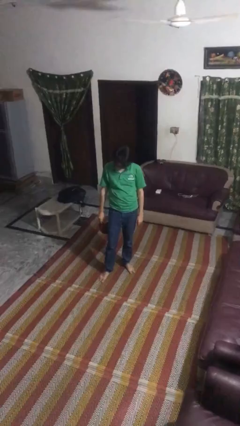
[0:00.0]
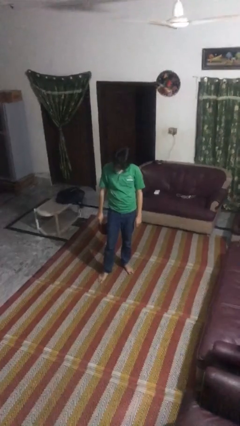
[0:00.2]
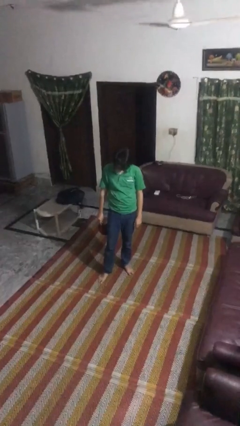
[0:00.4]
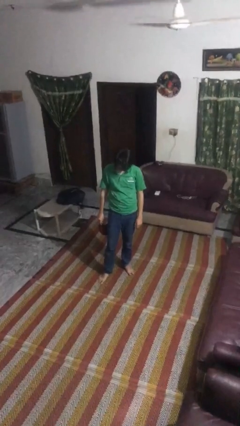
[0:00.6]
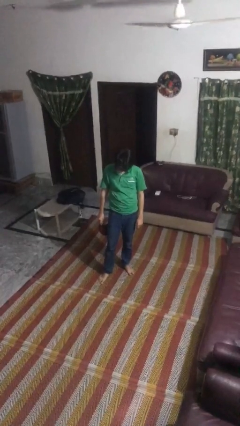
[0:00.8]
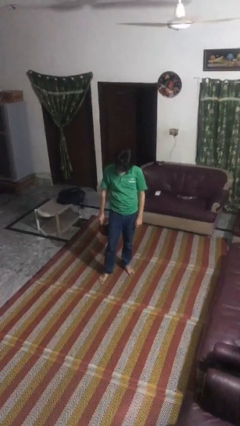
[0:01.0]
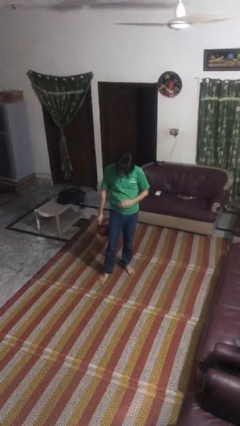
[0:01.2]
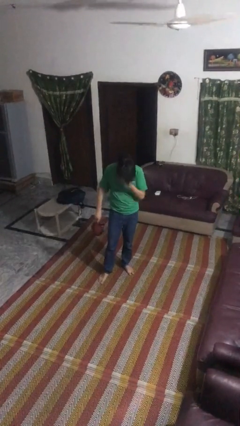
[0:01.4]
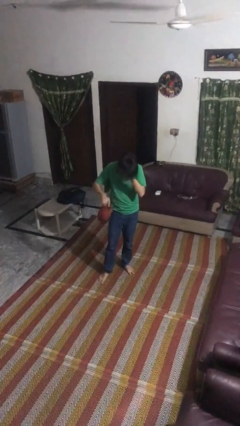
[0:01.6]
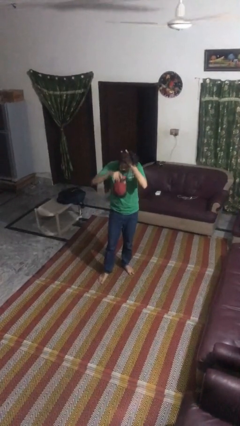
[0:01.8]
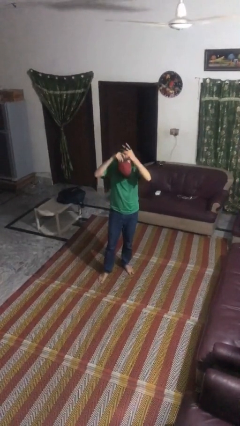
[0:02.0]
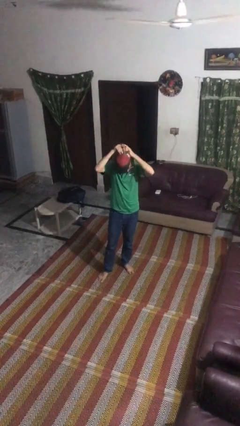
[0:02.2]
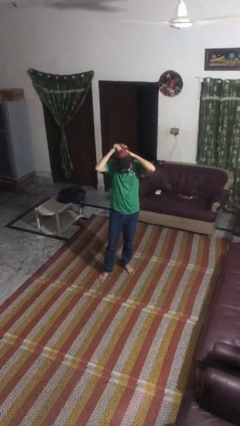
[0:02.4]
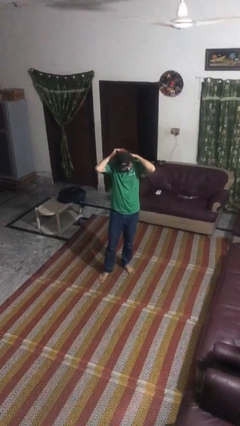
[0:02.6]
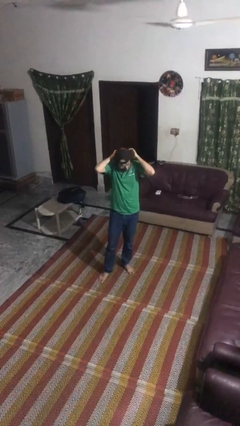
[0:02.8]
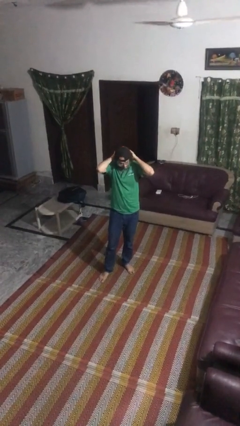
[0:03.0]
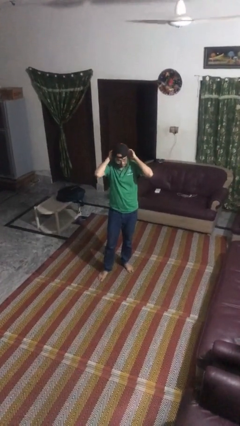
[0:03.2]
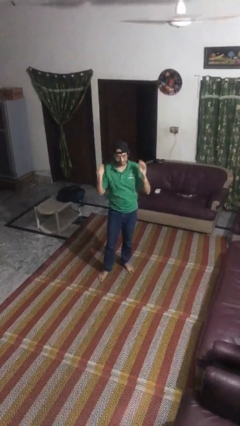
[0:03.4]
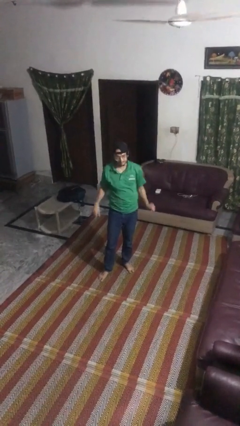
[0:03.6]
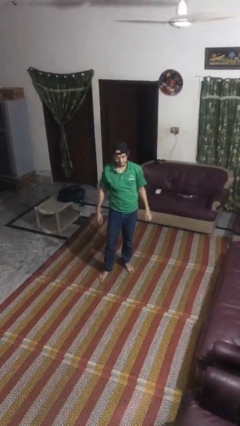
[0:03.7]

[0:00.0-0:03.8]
person puts on hat

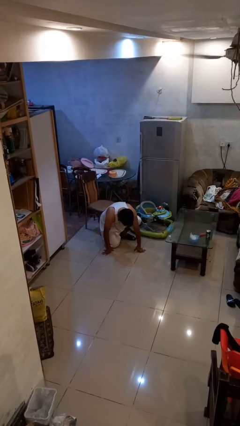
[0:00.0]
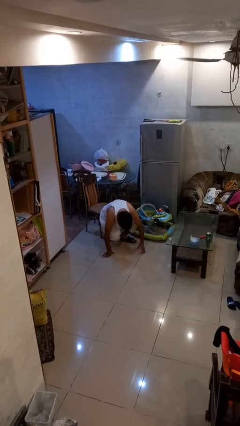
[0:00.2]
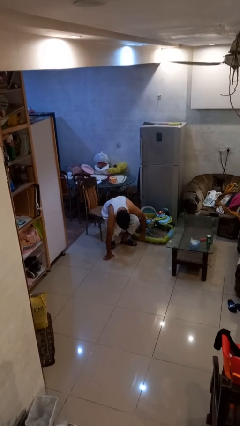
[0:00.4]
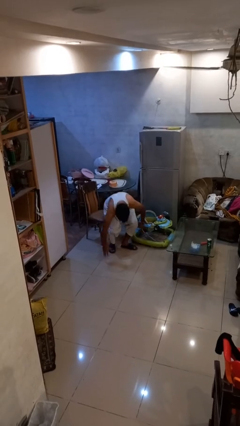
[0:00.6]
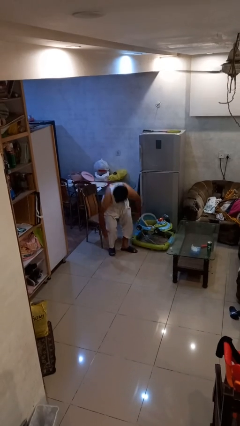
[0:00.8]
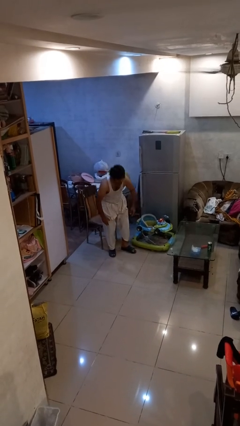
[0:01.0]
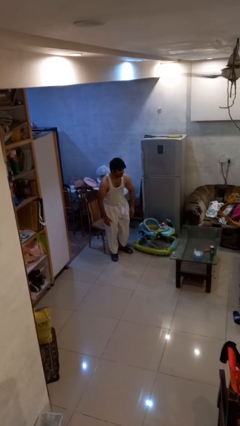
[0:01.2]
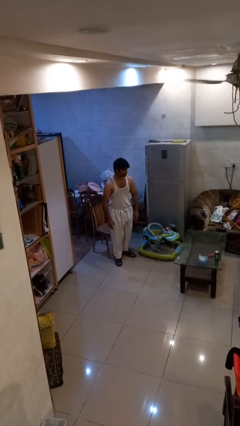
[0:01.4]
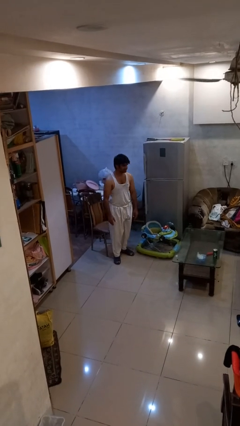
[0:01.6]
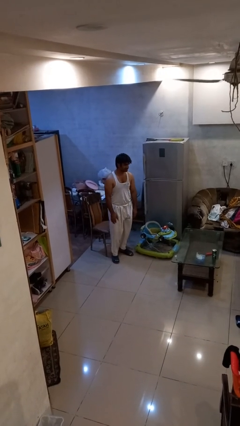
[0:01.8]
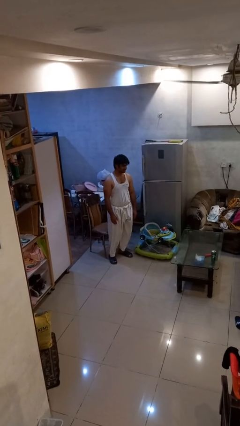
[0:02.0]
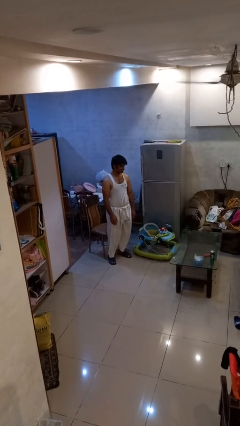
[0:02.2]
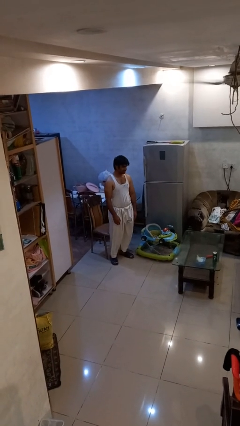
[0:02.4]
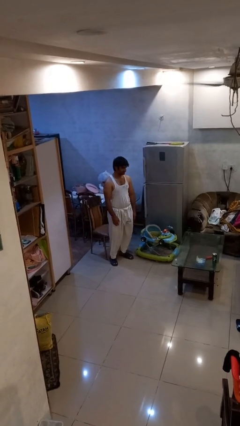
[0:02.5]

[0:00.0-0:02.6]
person stands up from floor

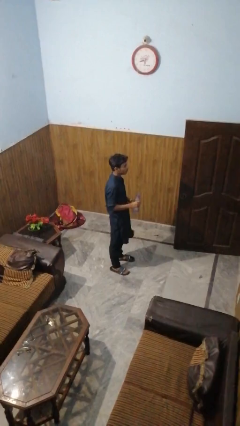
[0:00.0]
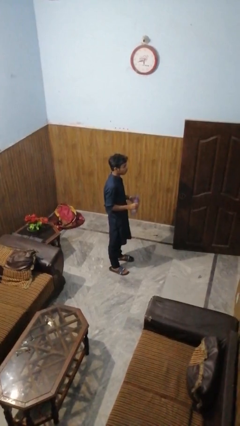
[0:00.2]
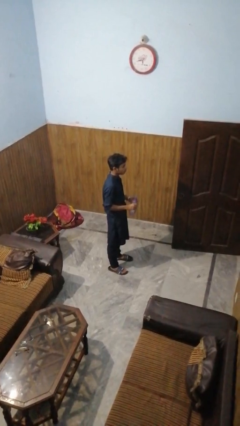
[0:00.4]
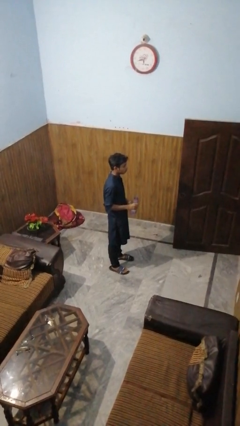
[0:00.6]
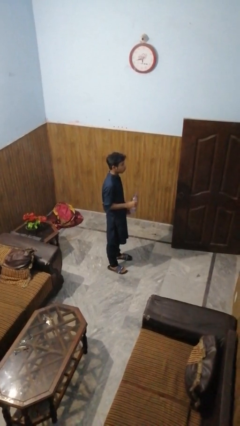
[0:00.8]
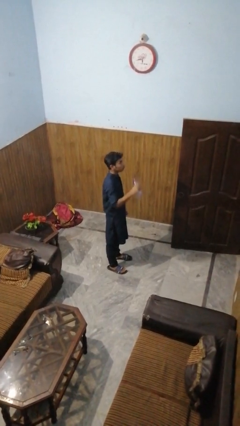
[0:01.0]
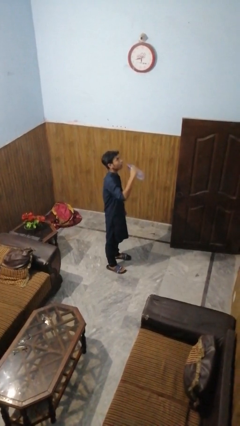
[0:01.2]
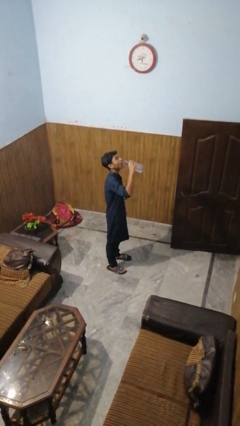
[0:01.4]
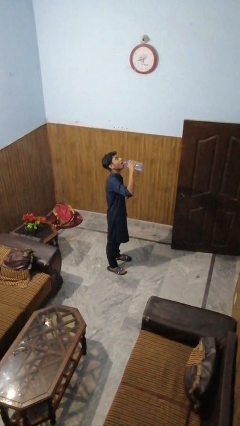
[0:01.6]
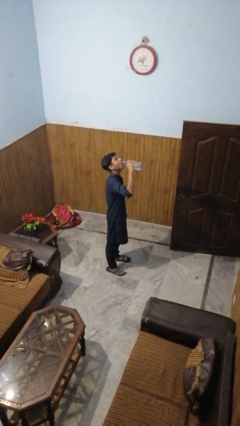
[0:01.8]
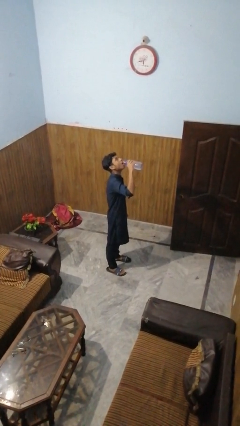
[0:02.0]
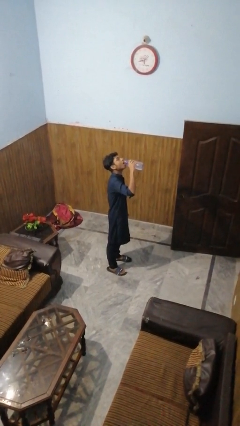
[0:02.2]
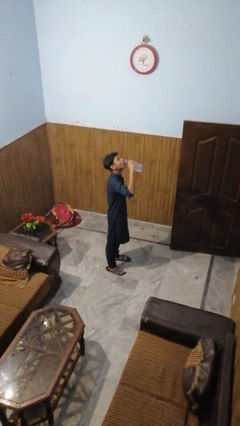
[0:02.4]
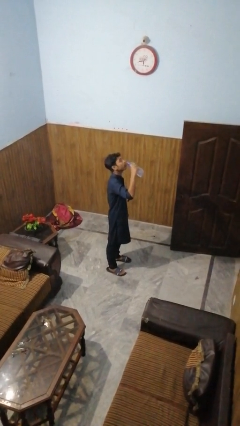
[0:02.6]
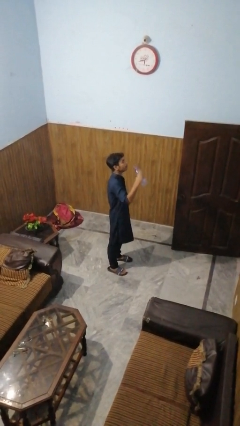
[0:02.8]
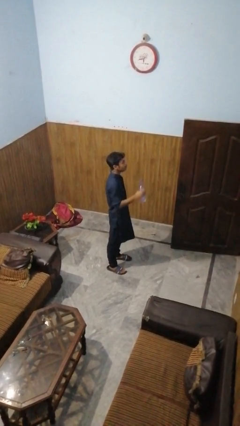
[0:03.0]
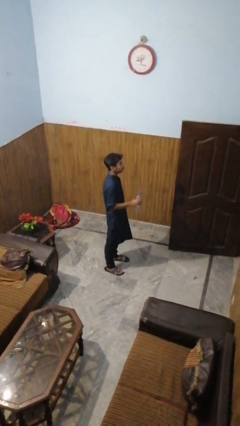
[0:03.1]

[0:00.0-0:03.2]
person drinks from bottle

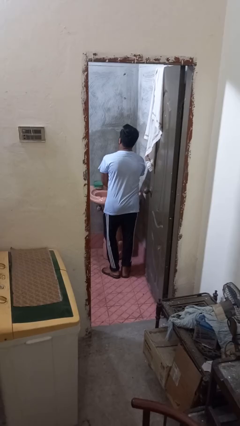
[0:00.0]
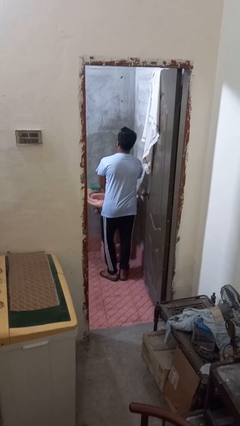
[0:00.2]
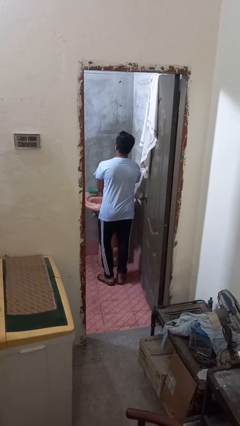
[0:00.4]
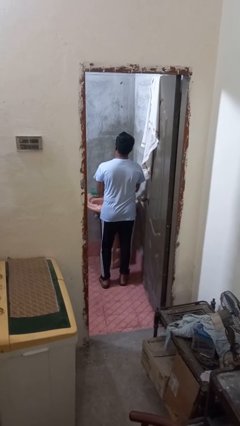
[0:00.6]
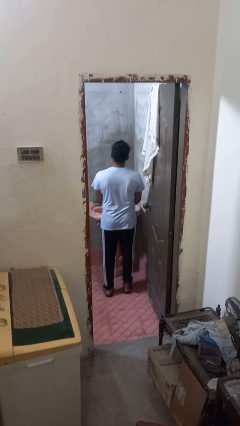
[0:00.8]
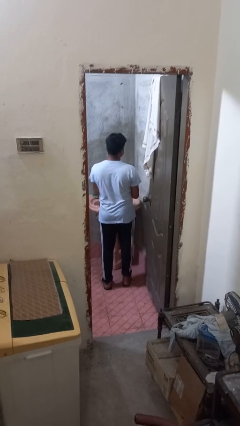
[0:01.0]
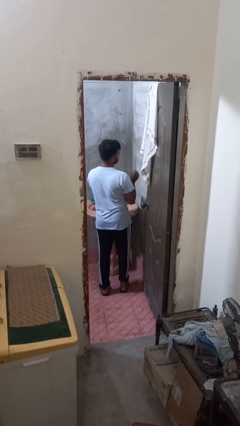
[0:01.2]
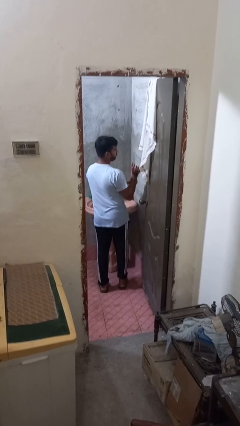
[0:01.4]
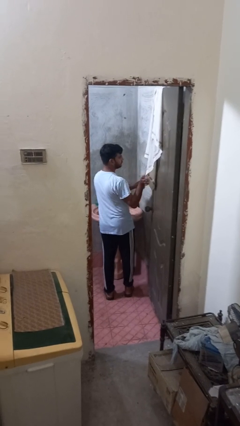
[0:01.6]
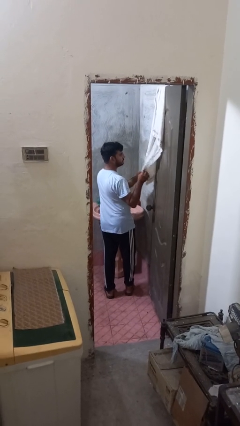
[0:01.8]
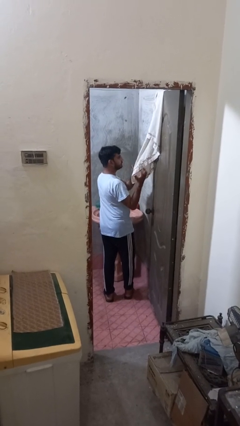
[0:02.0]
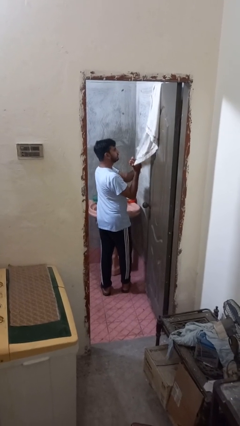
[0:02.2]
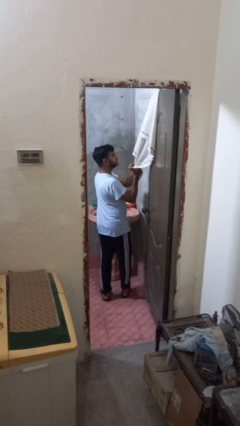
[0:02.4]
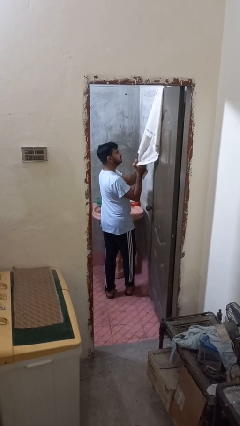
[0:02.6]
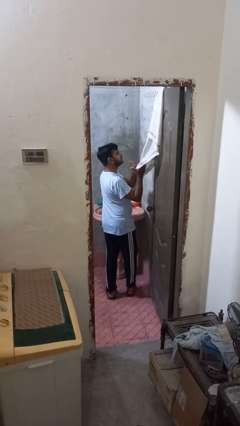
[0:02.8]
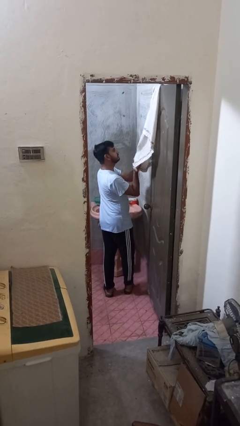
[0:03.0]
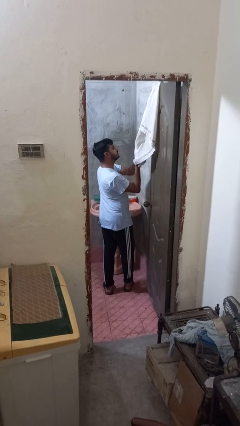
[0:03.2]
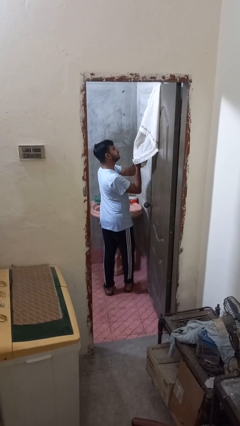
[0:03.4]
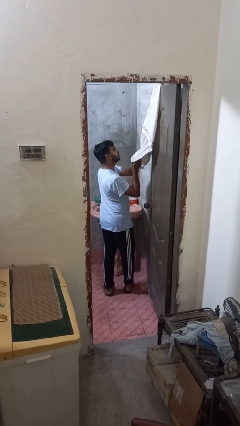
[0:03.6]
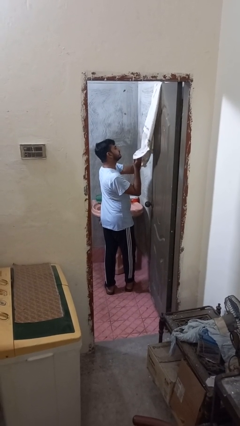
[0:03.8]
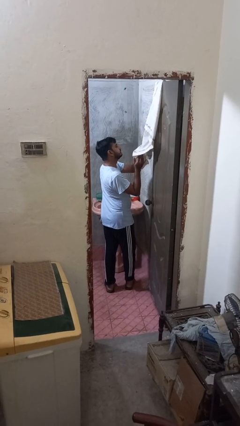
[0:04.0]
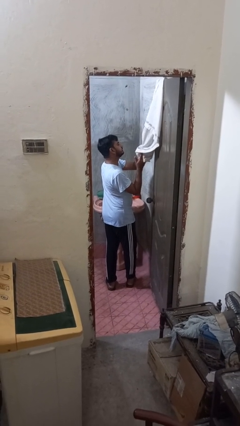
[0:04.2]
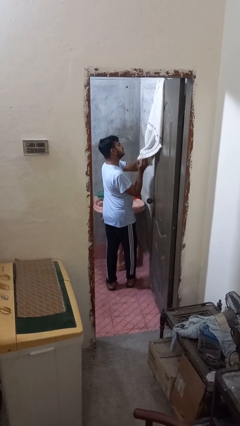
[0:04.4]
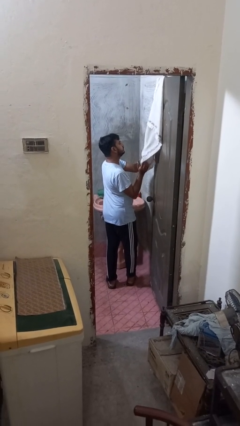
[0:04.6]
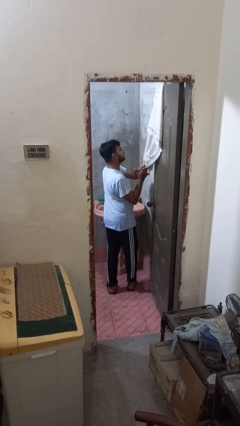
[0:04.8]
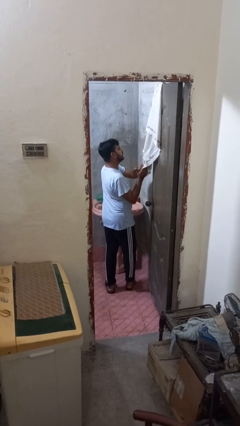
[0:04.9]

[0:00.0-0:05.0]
person dries hands with towel

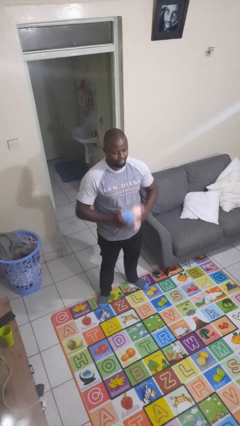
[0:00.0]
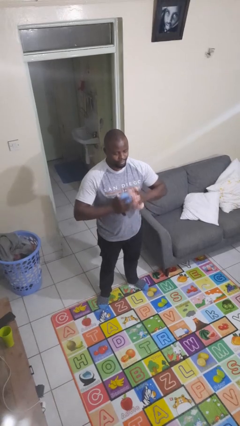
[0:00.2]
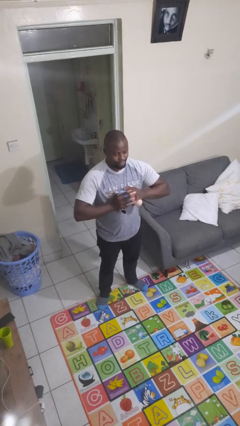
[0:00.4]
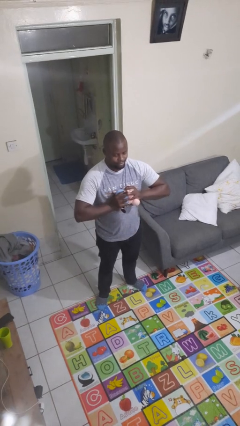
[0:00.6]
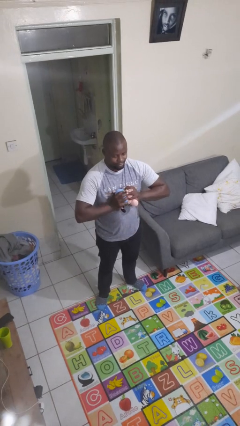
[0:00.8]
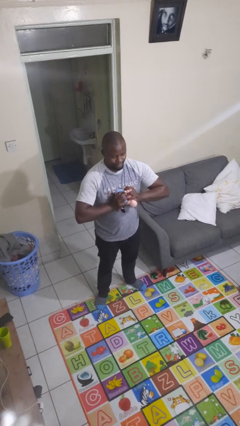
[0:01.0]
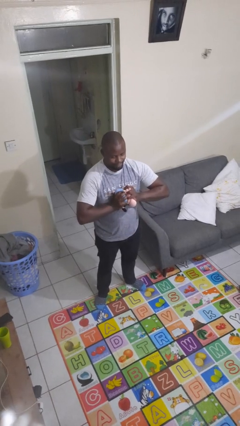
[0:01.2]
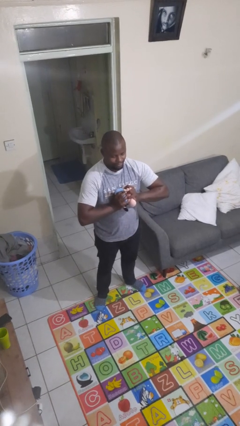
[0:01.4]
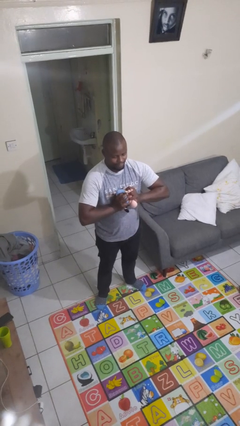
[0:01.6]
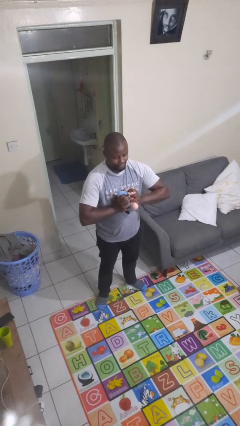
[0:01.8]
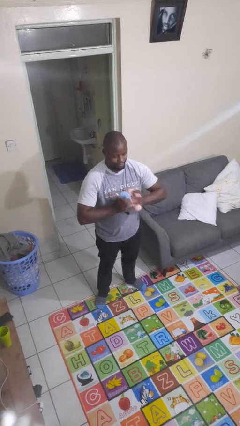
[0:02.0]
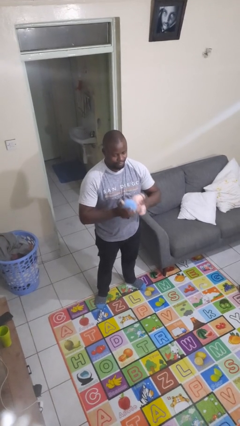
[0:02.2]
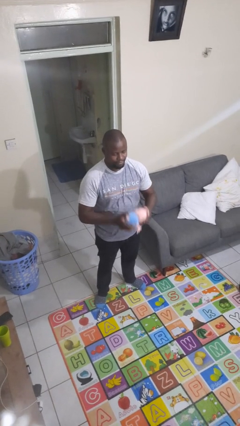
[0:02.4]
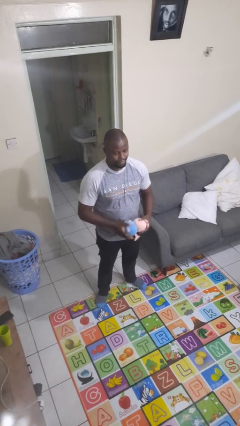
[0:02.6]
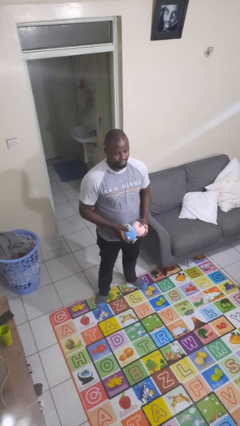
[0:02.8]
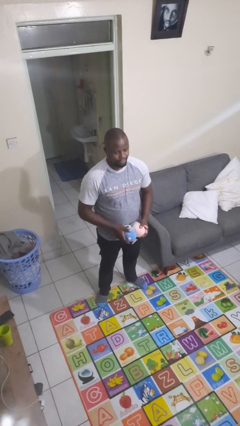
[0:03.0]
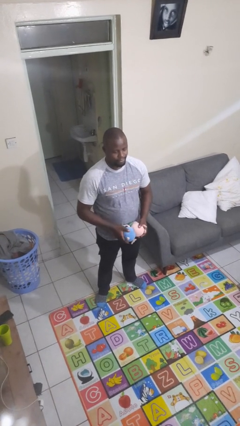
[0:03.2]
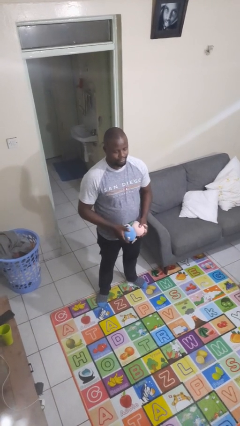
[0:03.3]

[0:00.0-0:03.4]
person squeezes object
